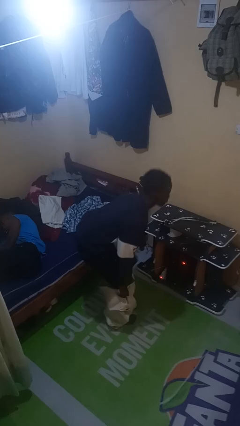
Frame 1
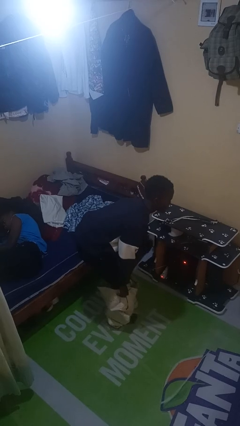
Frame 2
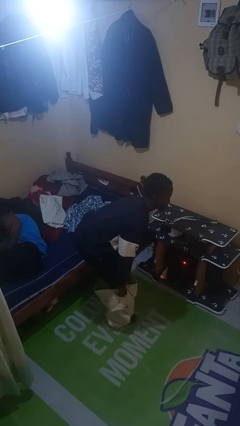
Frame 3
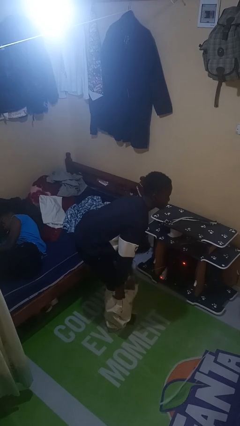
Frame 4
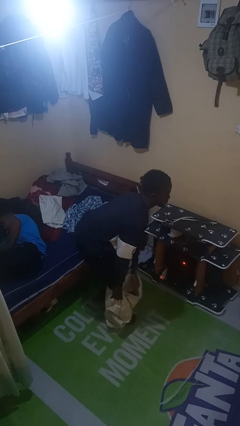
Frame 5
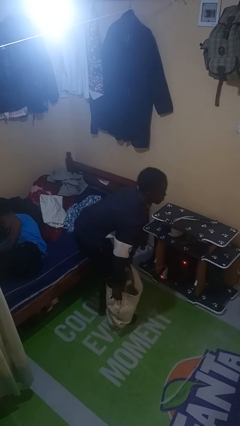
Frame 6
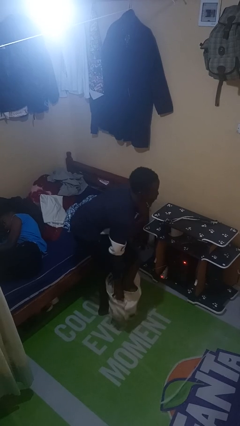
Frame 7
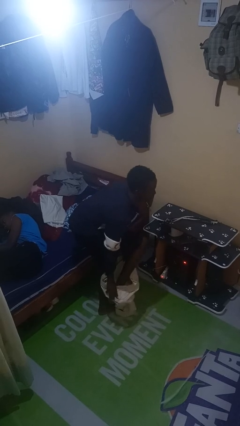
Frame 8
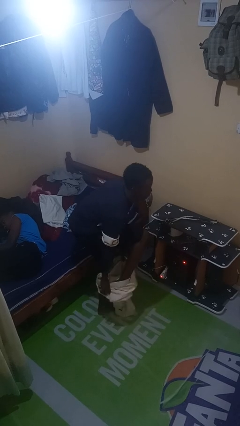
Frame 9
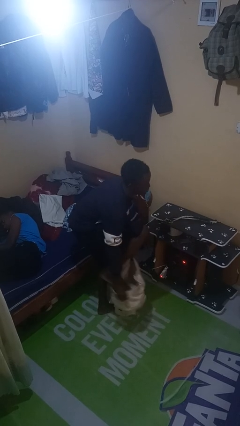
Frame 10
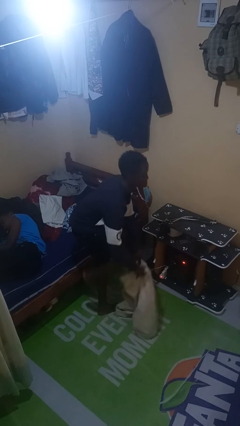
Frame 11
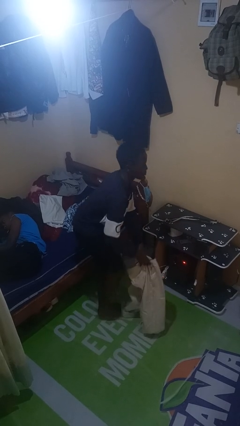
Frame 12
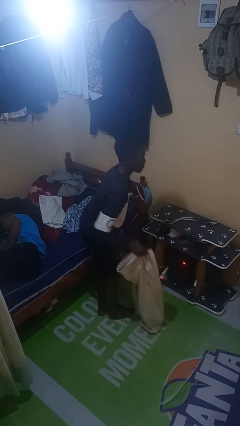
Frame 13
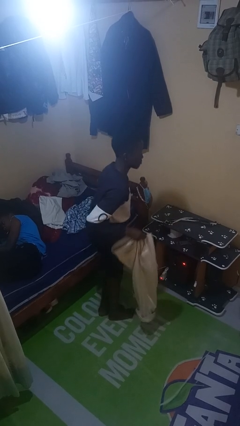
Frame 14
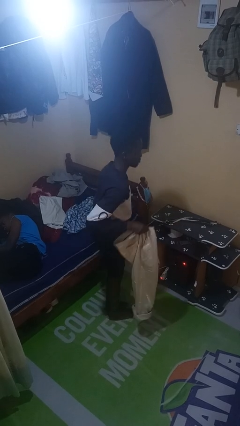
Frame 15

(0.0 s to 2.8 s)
person takes off pants

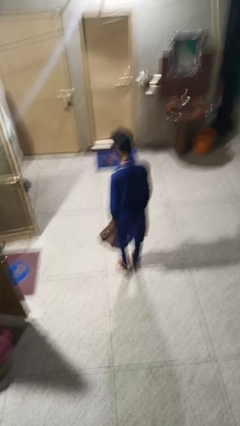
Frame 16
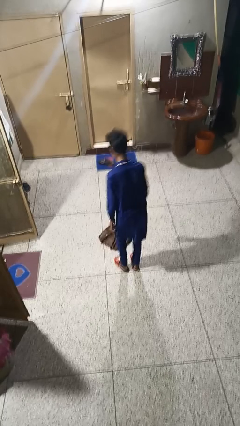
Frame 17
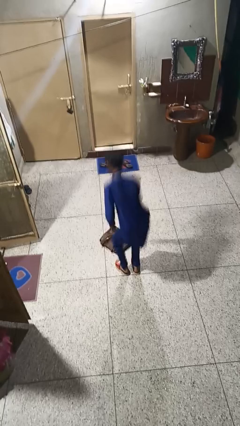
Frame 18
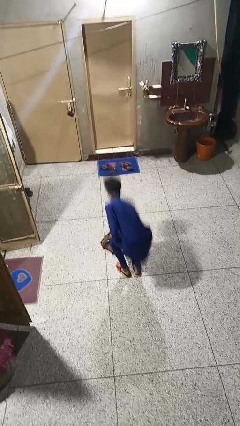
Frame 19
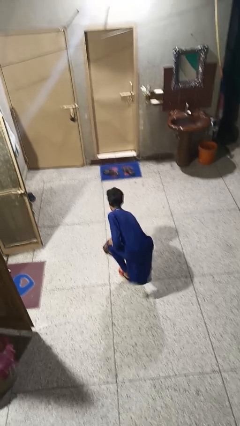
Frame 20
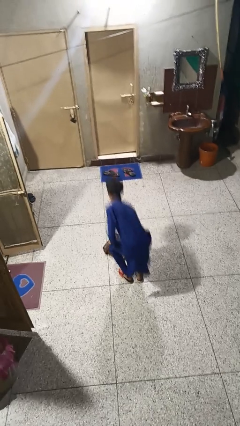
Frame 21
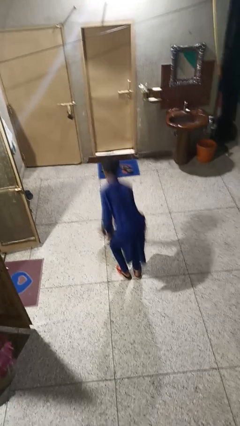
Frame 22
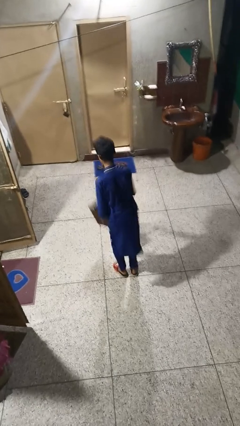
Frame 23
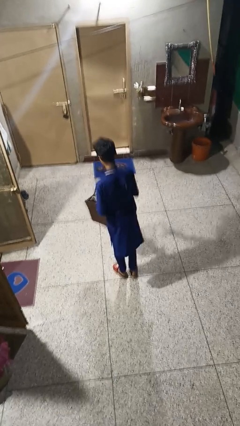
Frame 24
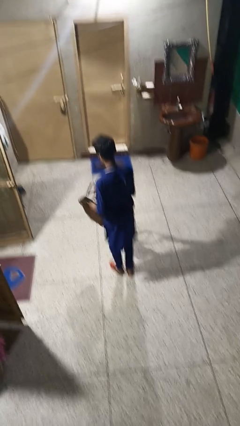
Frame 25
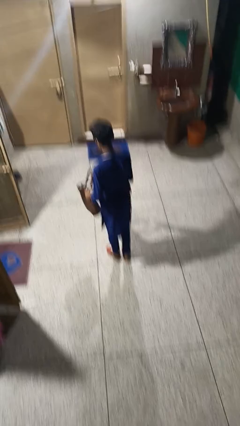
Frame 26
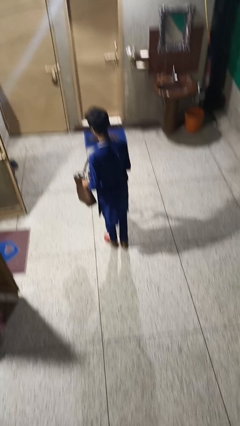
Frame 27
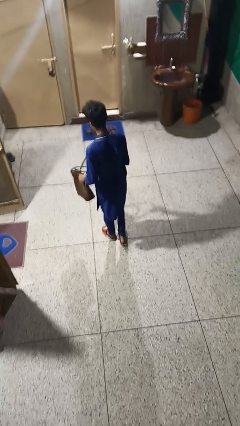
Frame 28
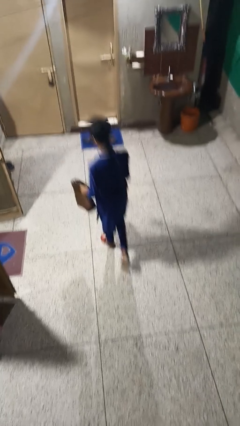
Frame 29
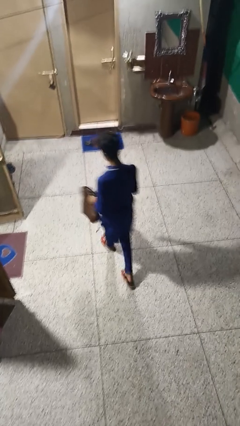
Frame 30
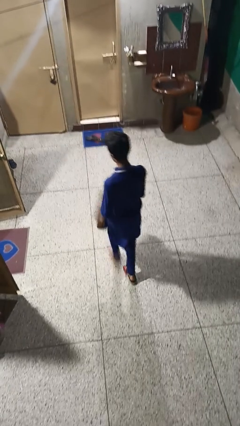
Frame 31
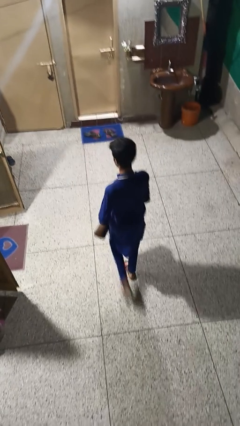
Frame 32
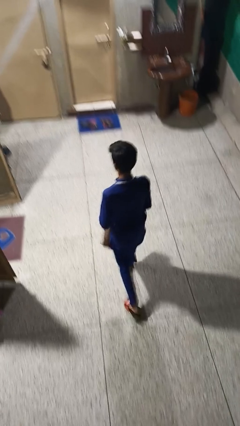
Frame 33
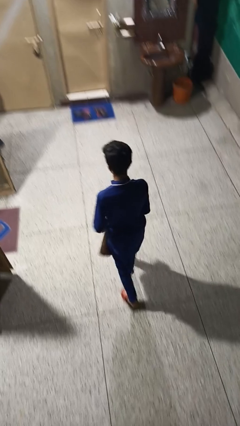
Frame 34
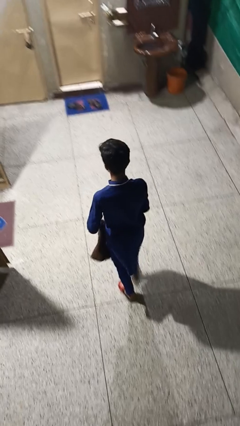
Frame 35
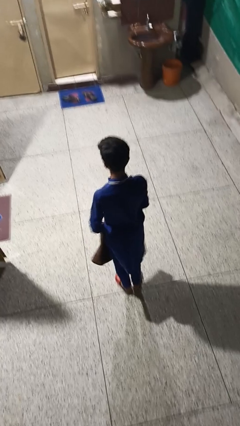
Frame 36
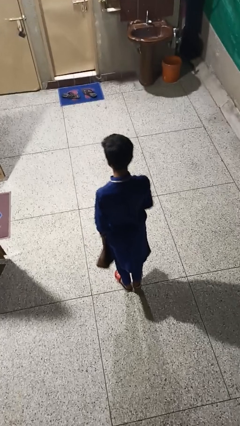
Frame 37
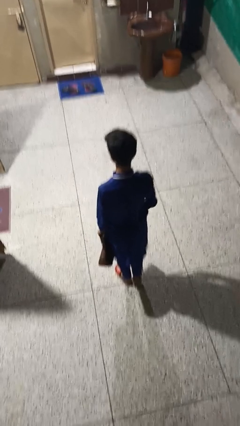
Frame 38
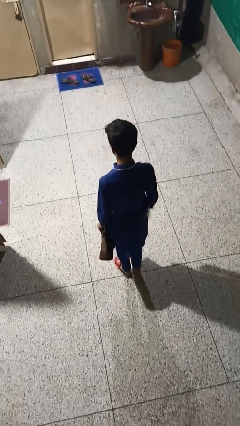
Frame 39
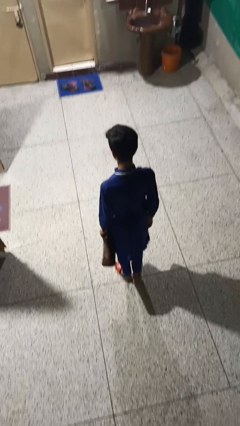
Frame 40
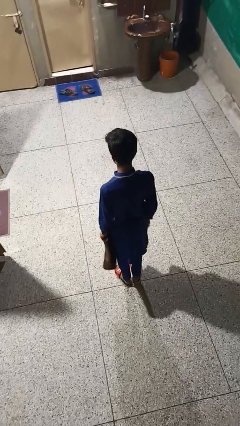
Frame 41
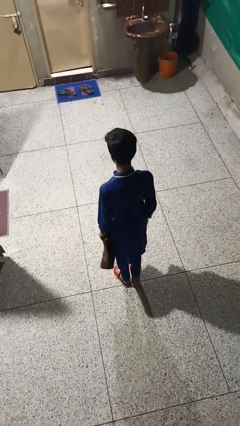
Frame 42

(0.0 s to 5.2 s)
person picks up object from floor

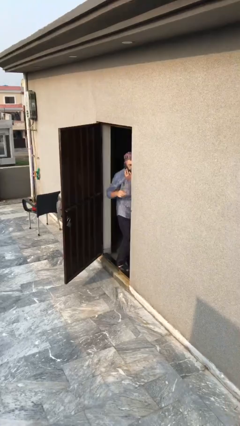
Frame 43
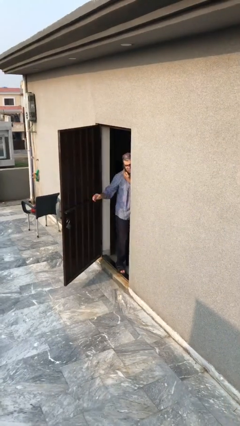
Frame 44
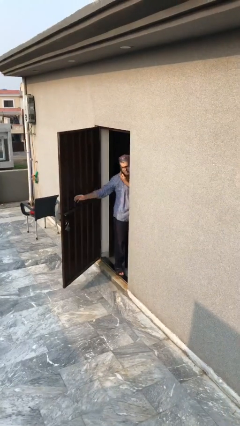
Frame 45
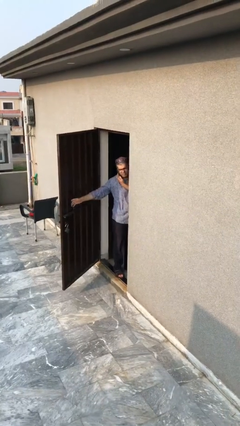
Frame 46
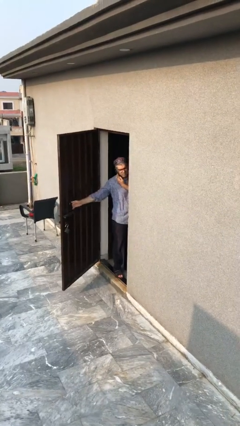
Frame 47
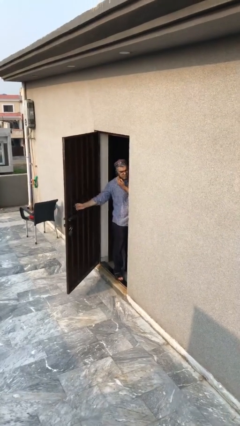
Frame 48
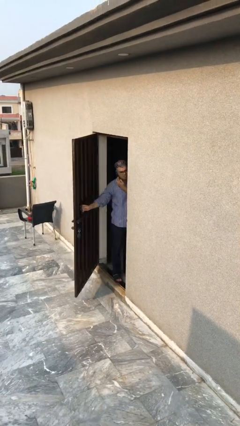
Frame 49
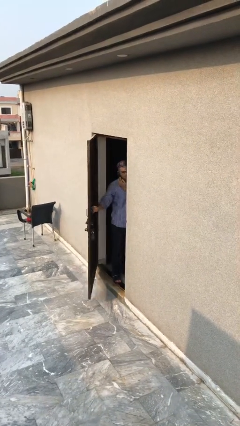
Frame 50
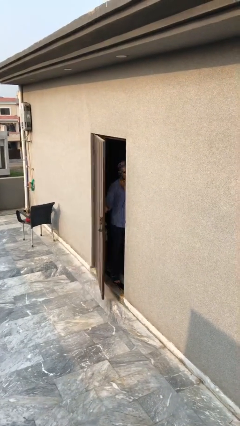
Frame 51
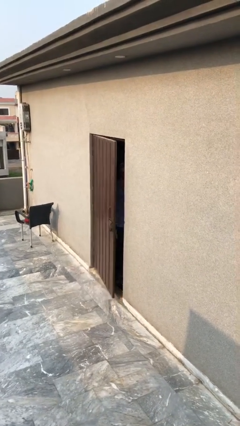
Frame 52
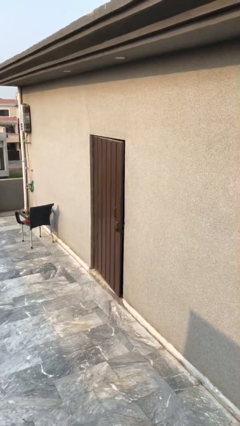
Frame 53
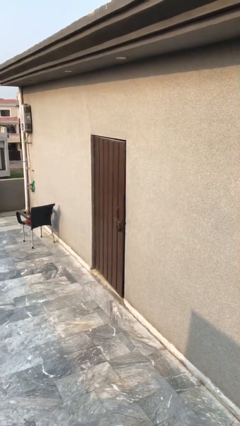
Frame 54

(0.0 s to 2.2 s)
person closes facility door

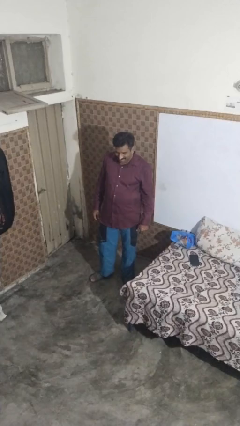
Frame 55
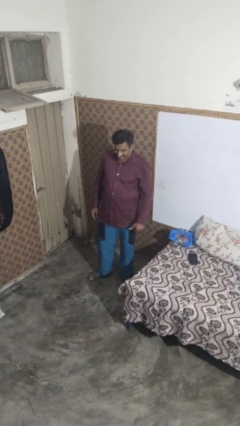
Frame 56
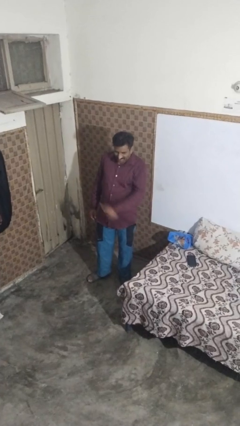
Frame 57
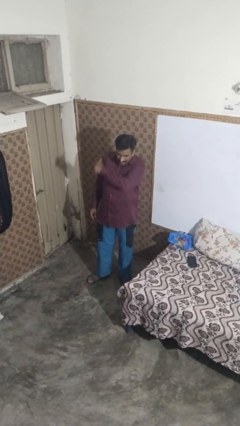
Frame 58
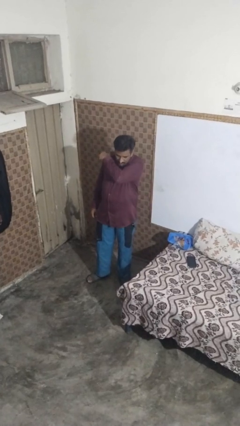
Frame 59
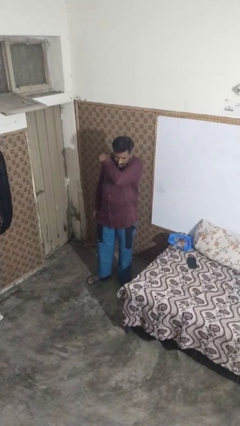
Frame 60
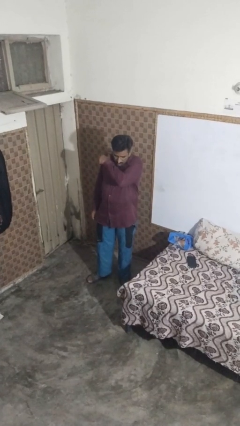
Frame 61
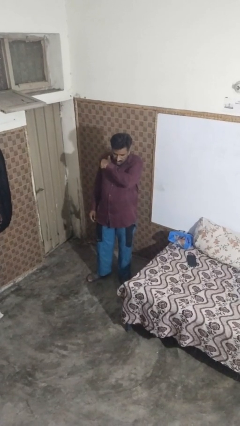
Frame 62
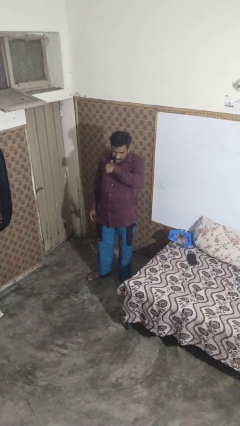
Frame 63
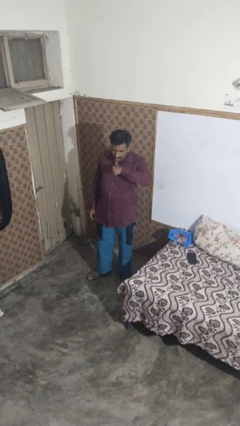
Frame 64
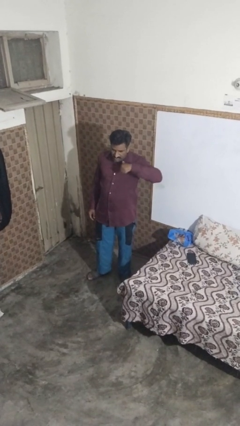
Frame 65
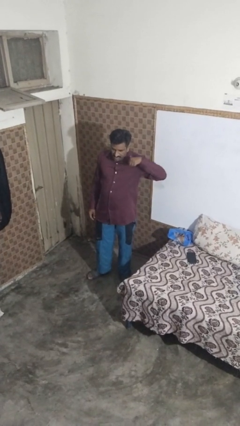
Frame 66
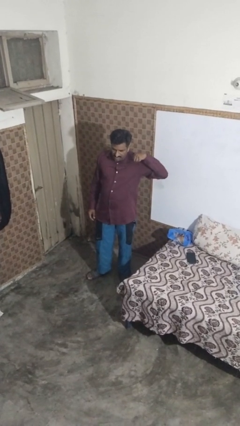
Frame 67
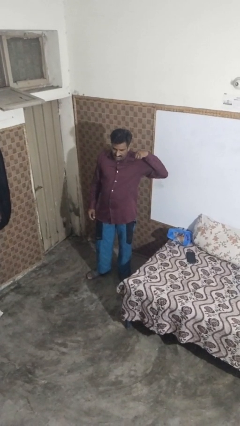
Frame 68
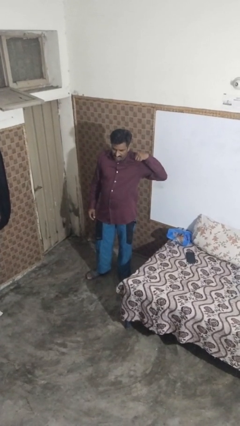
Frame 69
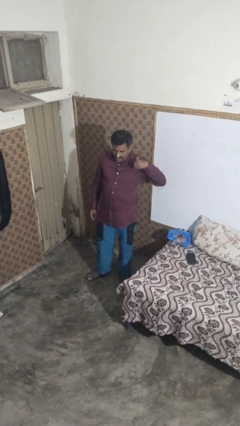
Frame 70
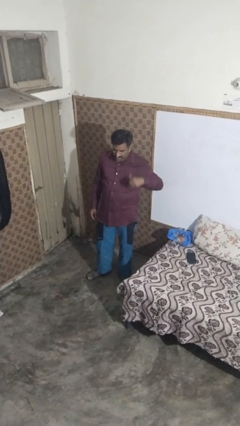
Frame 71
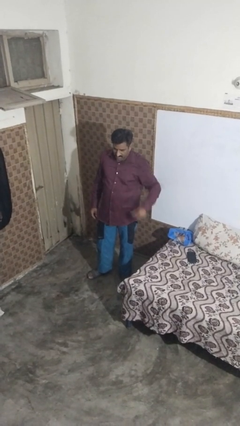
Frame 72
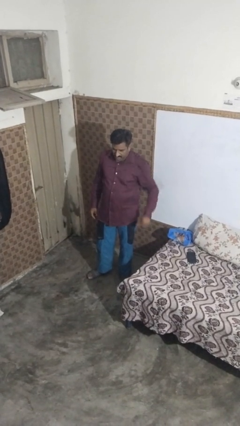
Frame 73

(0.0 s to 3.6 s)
person gestures cut

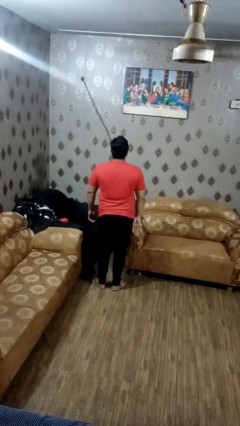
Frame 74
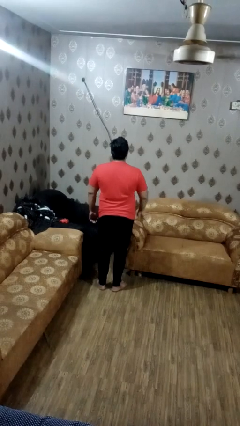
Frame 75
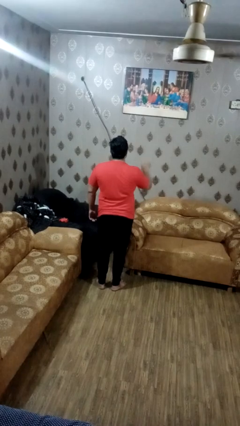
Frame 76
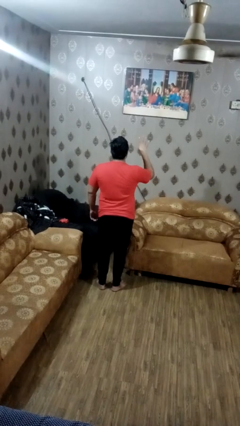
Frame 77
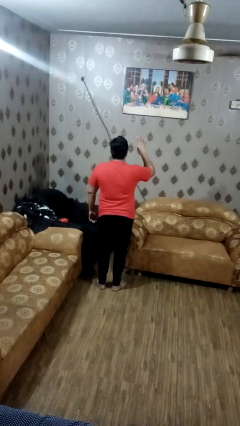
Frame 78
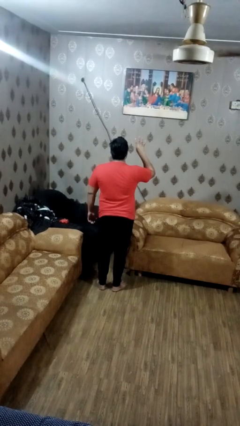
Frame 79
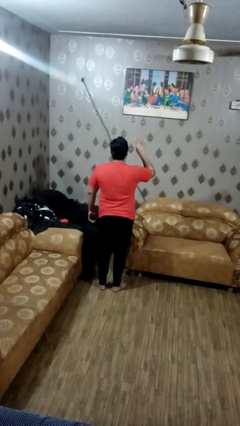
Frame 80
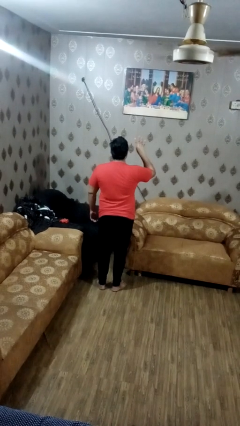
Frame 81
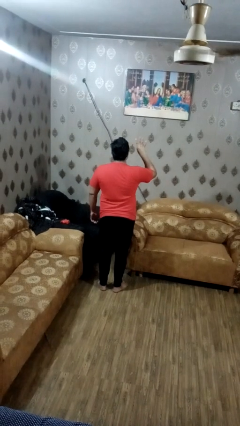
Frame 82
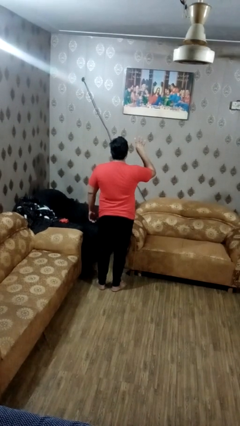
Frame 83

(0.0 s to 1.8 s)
person gestures number four

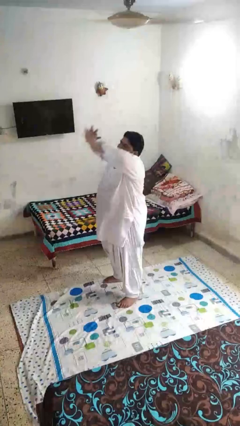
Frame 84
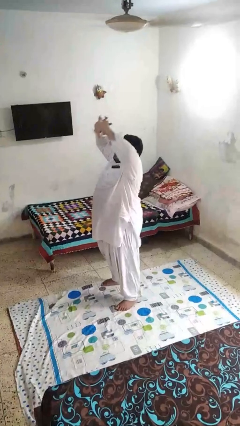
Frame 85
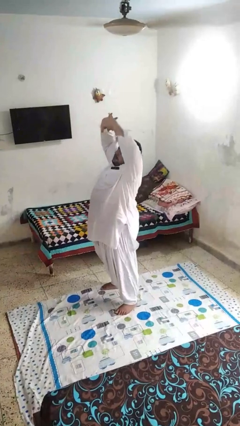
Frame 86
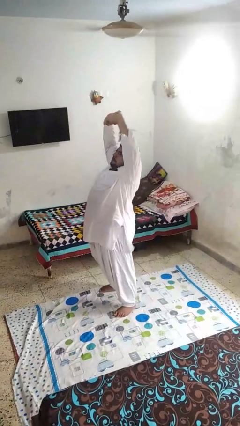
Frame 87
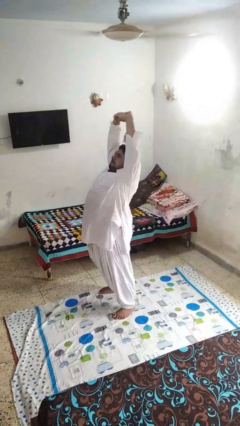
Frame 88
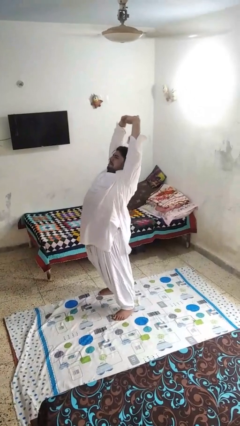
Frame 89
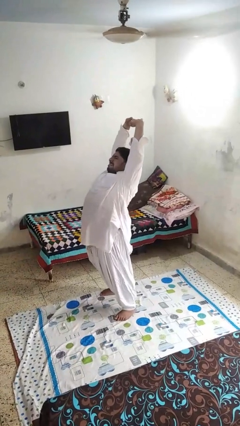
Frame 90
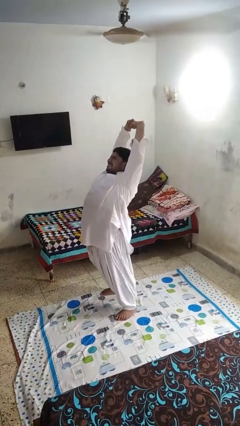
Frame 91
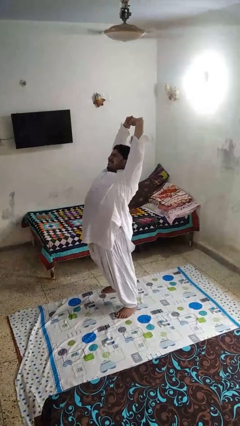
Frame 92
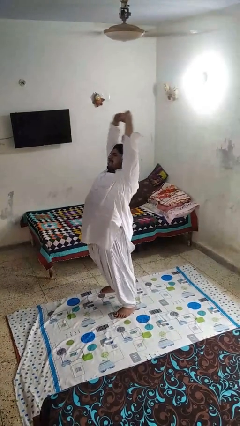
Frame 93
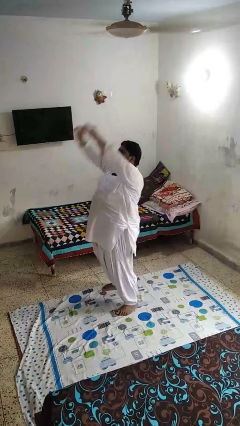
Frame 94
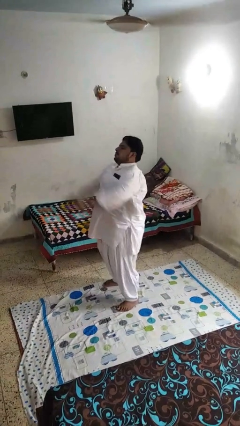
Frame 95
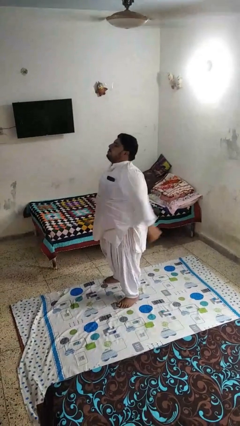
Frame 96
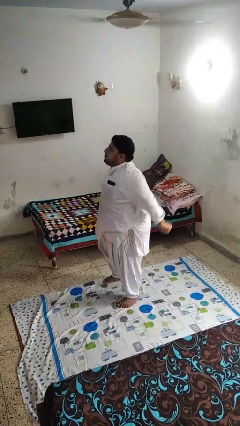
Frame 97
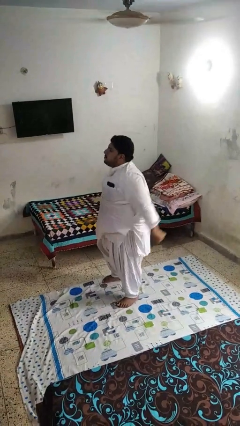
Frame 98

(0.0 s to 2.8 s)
person stretches arms over head
